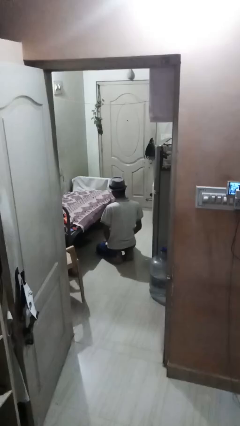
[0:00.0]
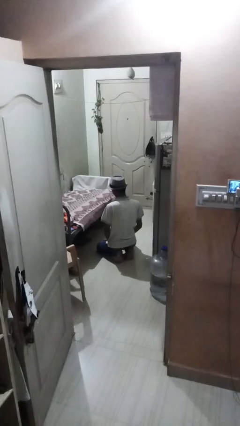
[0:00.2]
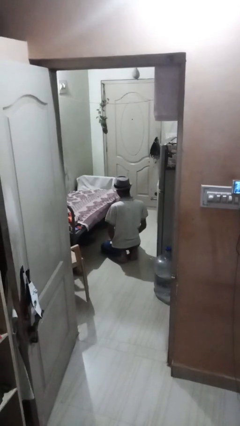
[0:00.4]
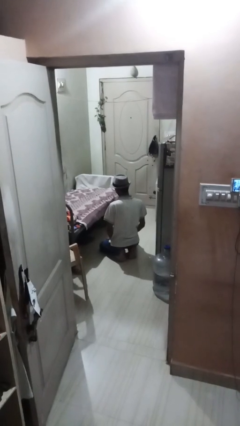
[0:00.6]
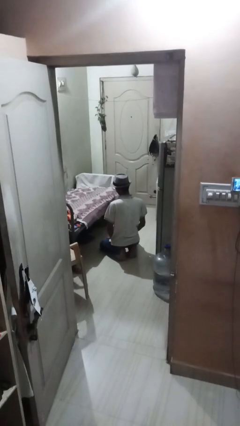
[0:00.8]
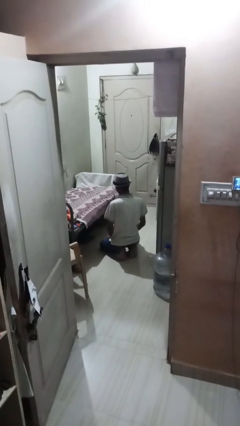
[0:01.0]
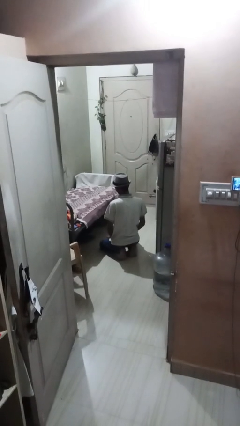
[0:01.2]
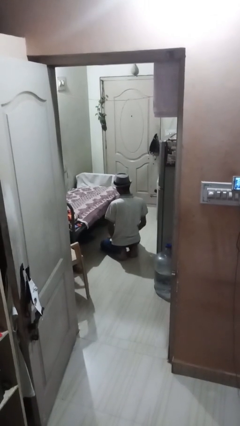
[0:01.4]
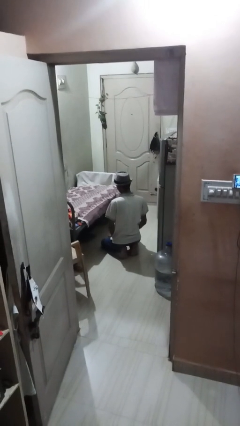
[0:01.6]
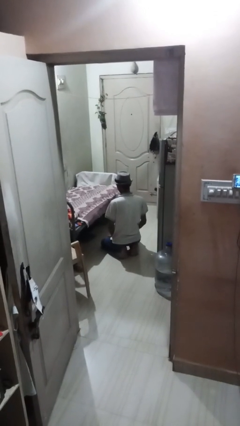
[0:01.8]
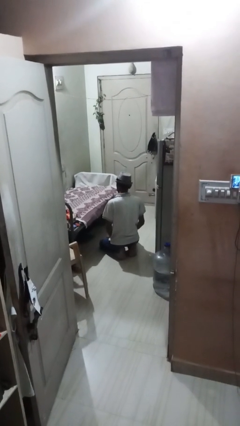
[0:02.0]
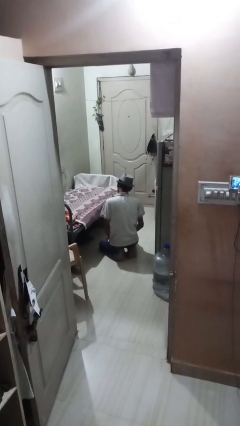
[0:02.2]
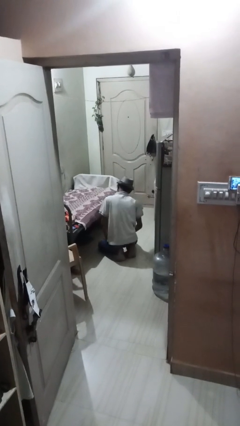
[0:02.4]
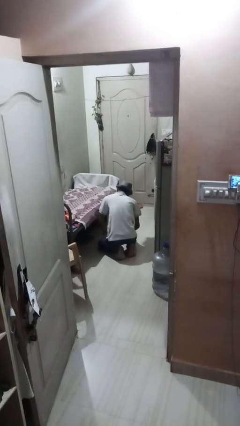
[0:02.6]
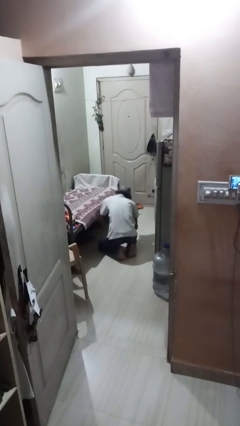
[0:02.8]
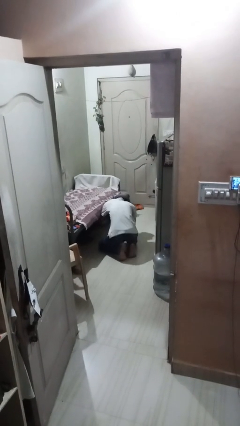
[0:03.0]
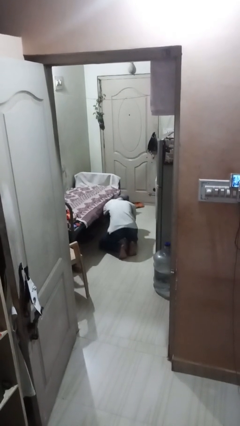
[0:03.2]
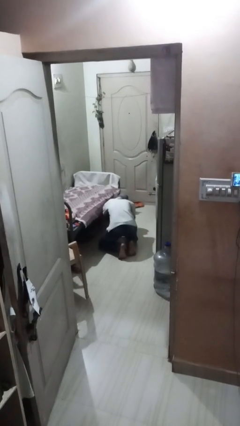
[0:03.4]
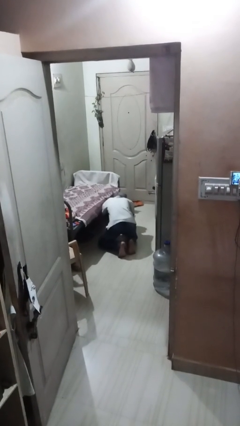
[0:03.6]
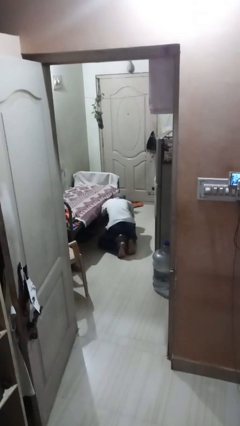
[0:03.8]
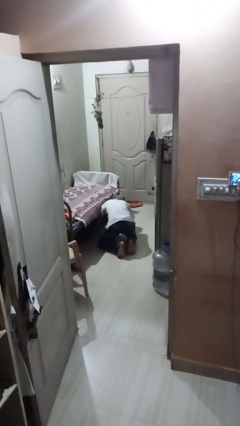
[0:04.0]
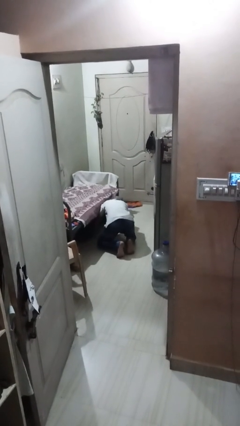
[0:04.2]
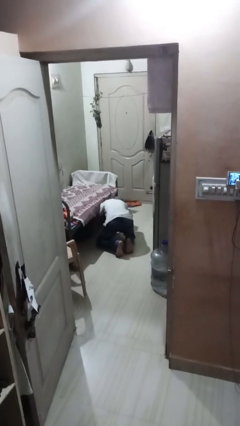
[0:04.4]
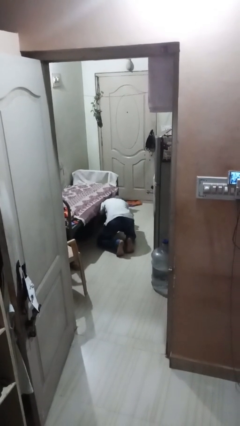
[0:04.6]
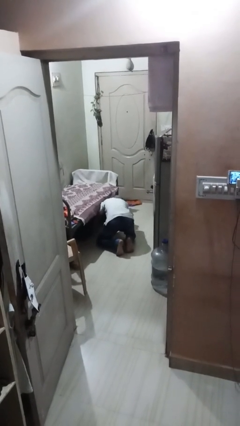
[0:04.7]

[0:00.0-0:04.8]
person searches under bed

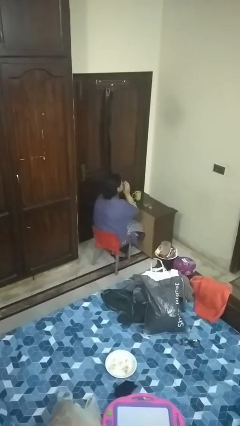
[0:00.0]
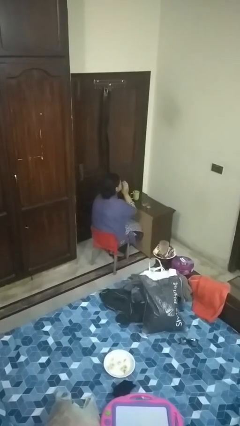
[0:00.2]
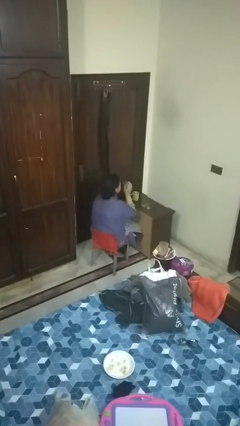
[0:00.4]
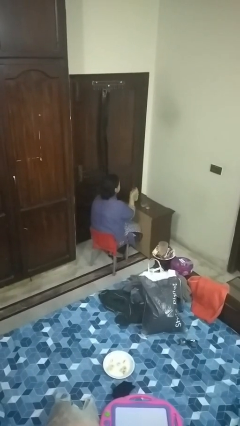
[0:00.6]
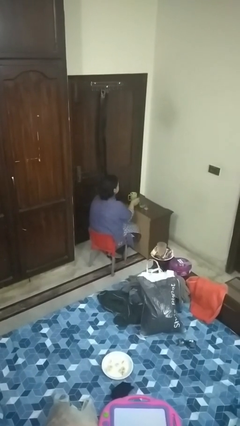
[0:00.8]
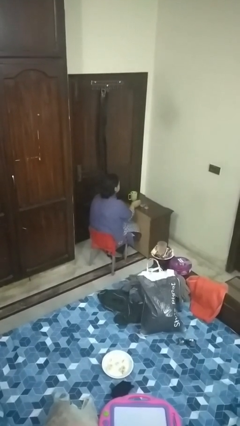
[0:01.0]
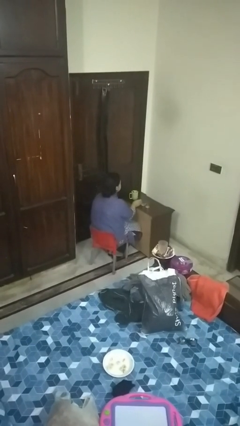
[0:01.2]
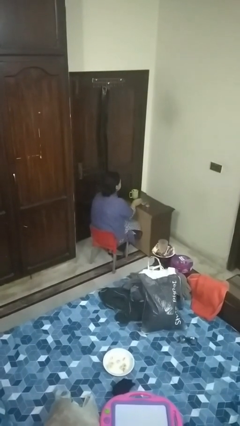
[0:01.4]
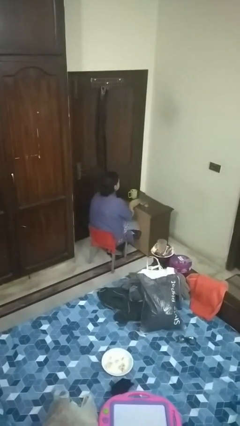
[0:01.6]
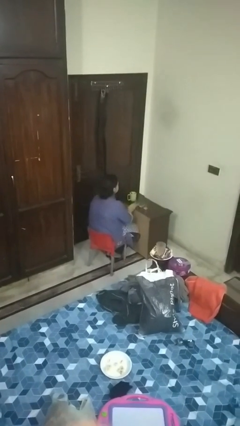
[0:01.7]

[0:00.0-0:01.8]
person puts down object on table

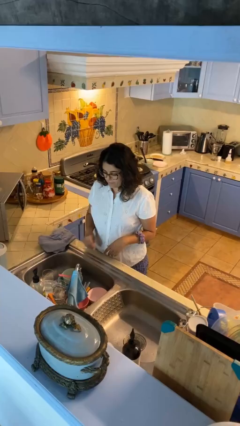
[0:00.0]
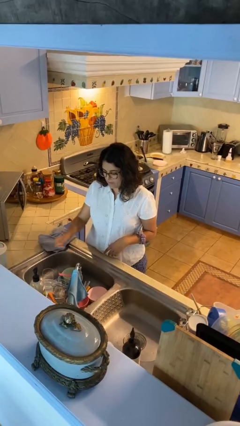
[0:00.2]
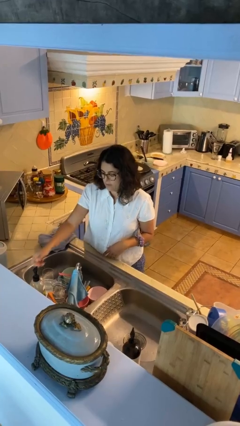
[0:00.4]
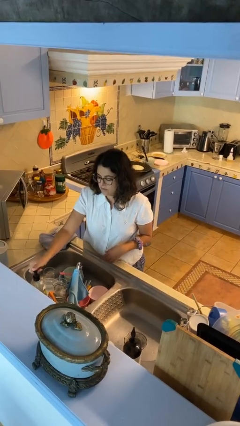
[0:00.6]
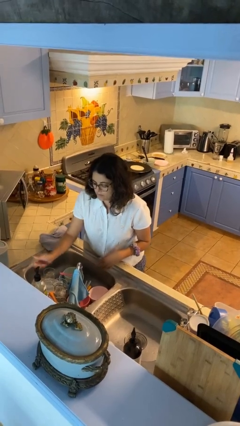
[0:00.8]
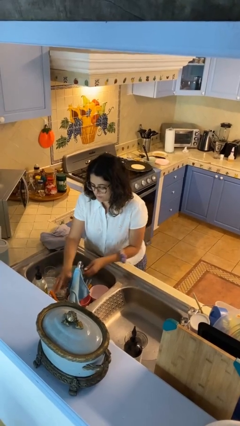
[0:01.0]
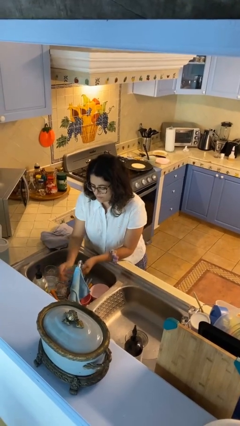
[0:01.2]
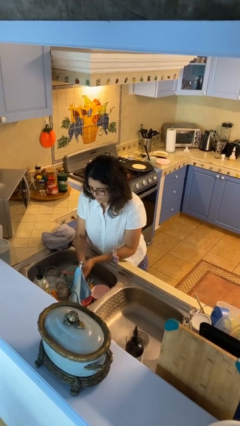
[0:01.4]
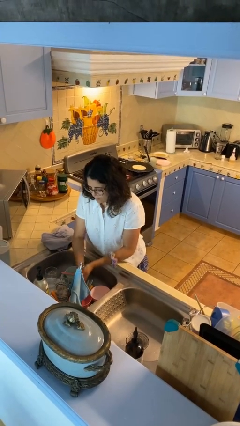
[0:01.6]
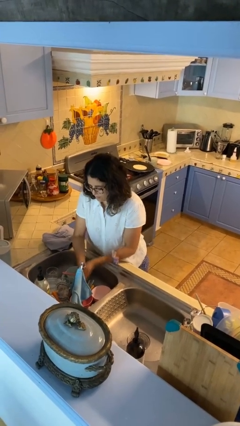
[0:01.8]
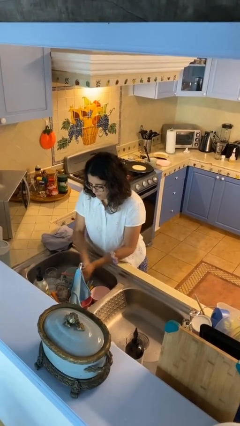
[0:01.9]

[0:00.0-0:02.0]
person washes hands

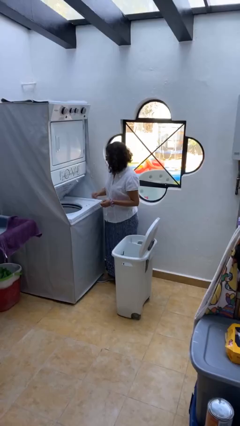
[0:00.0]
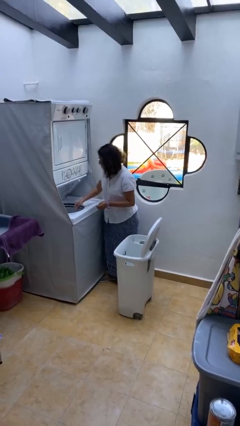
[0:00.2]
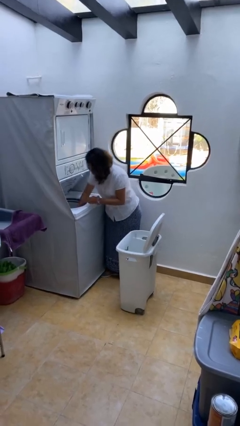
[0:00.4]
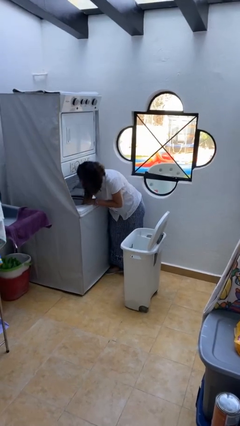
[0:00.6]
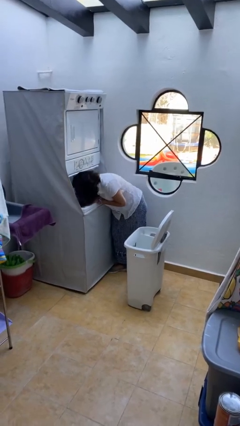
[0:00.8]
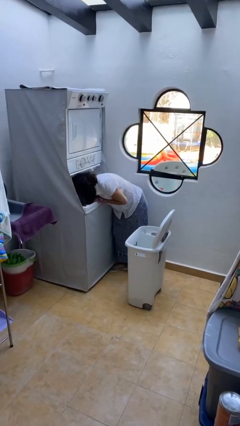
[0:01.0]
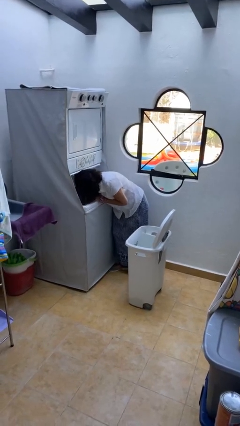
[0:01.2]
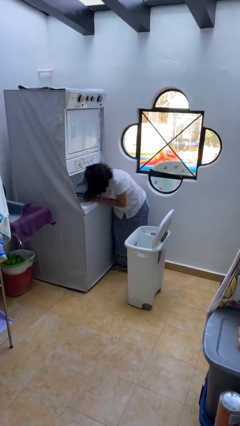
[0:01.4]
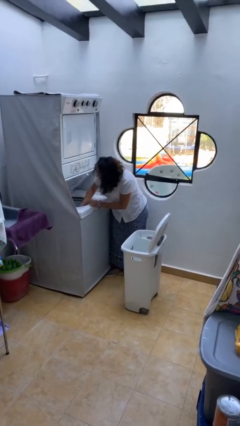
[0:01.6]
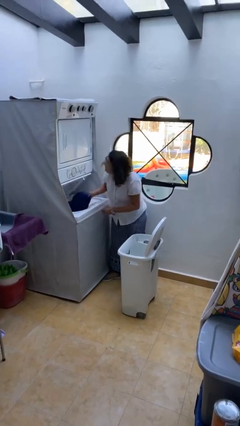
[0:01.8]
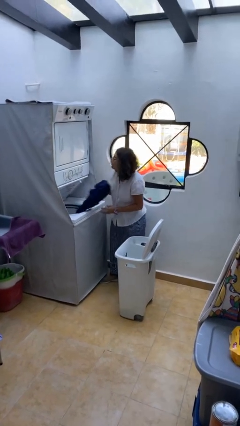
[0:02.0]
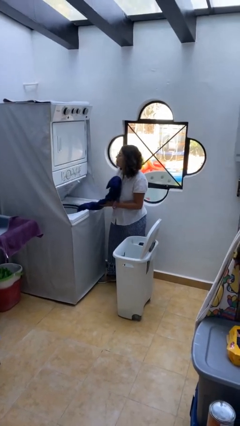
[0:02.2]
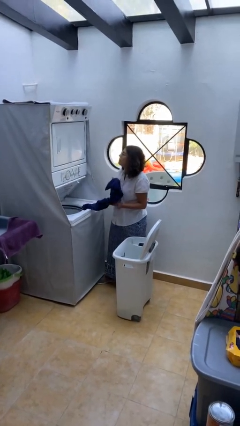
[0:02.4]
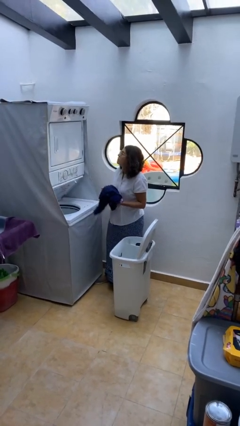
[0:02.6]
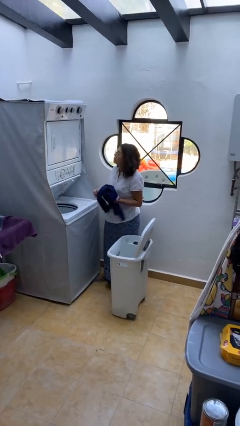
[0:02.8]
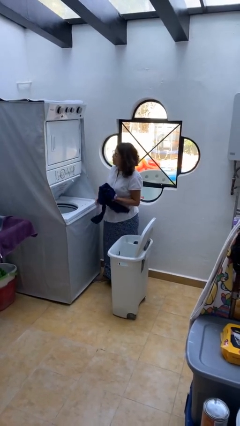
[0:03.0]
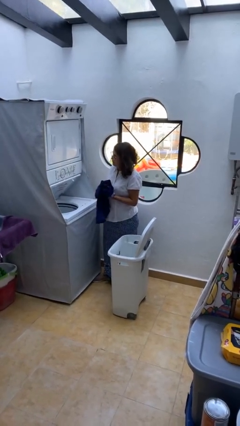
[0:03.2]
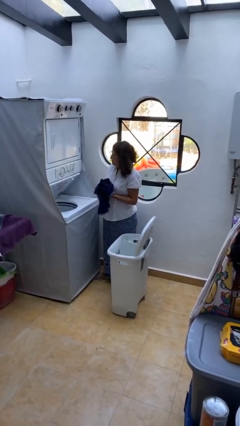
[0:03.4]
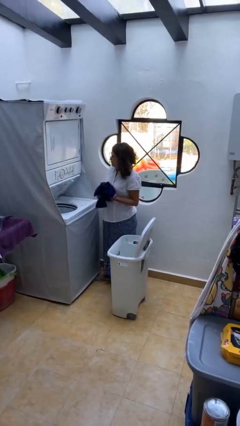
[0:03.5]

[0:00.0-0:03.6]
person loads clotheswasher

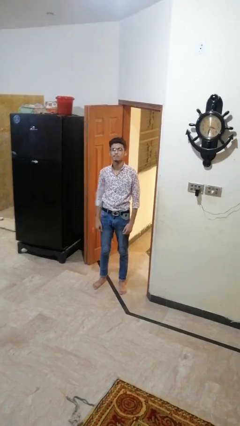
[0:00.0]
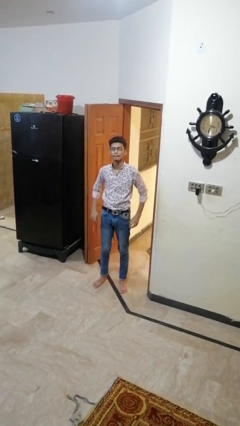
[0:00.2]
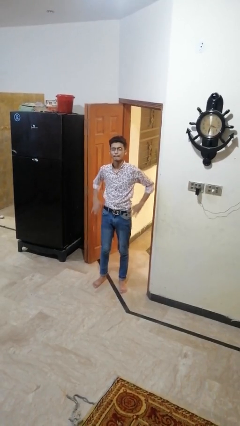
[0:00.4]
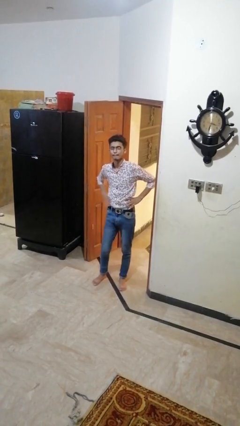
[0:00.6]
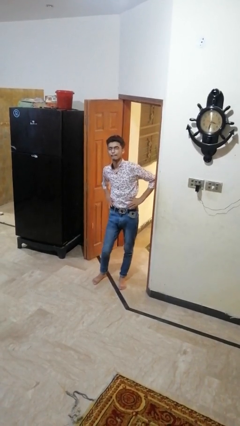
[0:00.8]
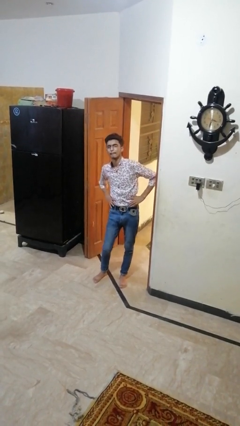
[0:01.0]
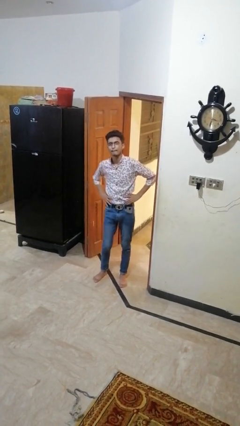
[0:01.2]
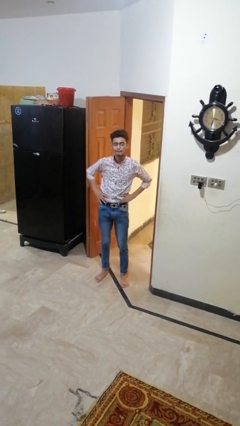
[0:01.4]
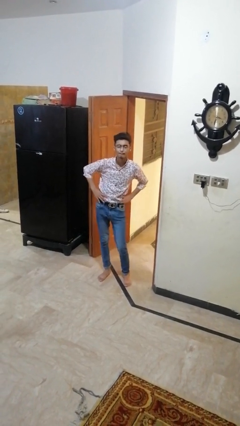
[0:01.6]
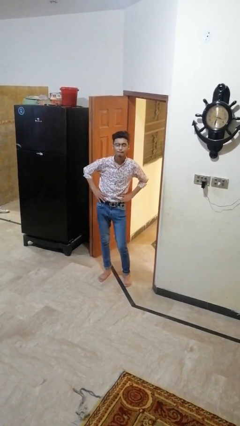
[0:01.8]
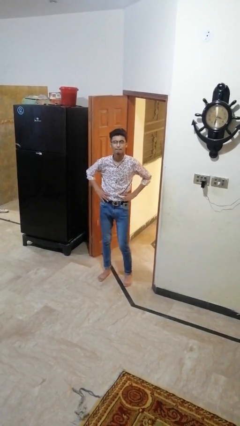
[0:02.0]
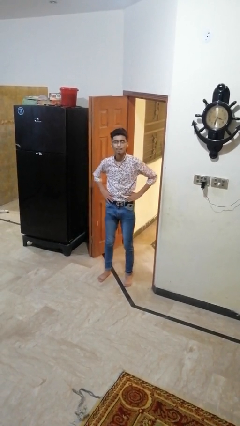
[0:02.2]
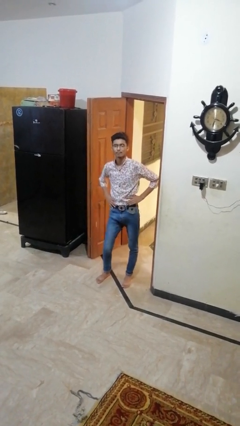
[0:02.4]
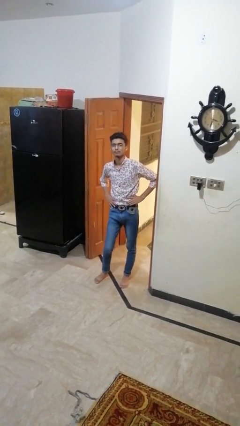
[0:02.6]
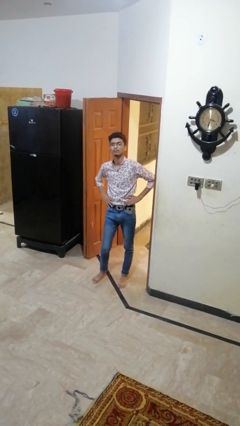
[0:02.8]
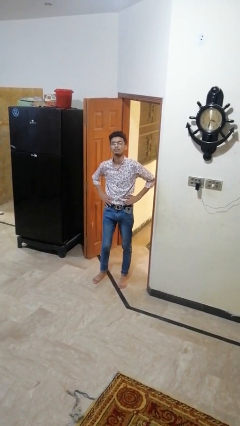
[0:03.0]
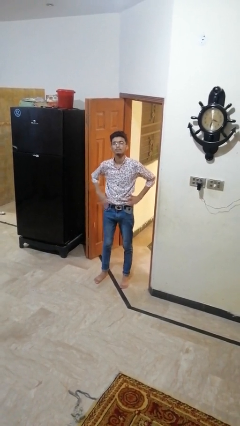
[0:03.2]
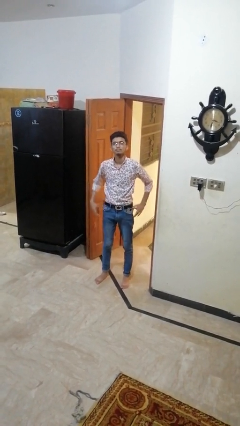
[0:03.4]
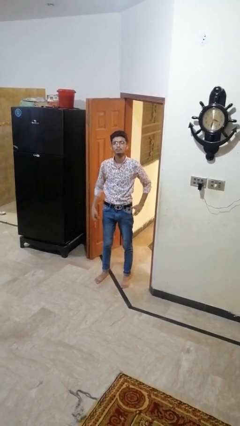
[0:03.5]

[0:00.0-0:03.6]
person wiggles hips

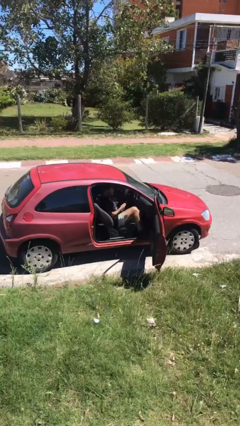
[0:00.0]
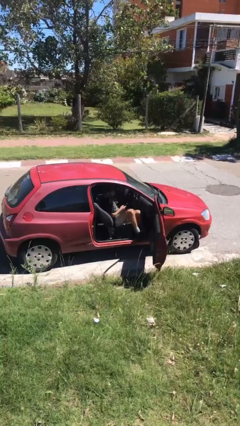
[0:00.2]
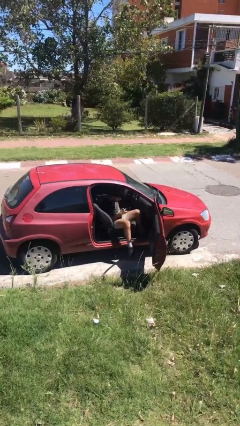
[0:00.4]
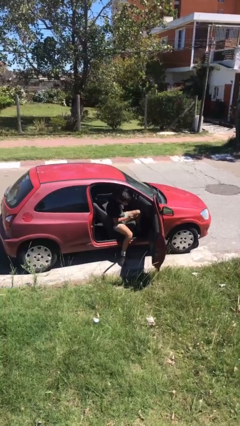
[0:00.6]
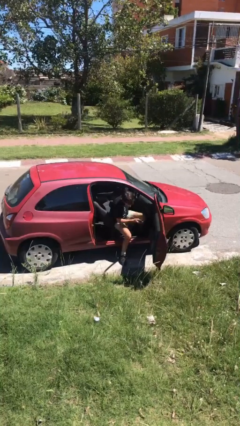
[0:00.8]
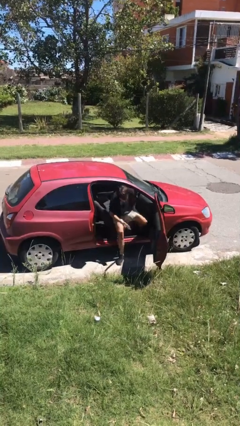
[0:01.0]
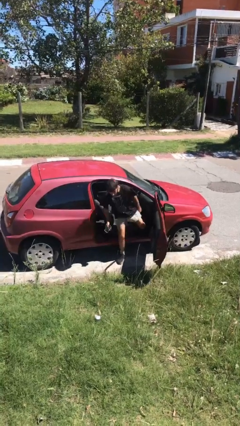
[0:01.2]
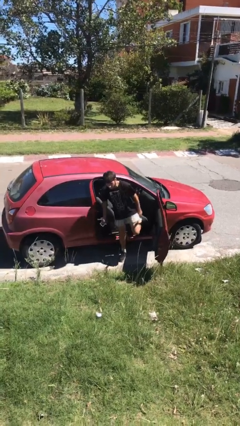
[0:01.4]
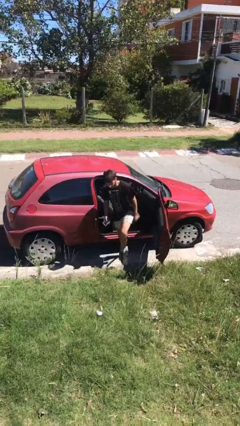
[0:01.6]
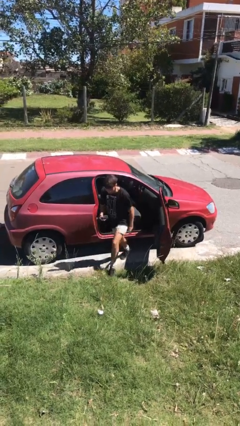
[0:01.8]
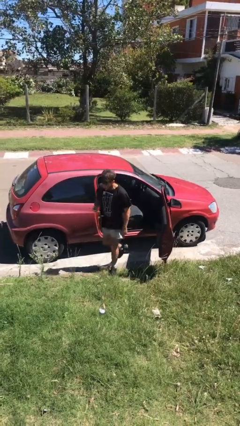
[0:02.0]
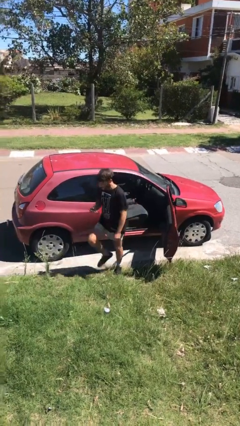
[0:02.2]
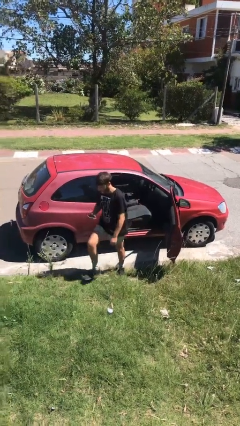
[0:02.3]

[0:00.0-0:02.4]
person exits car
